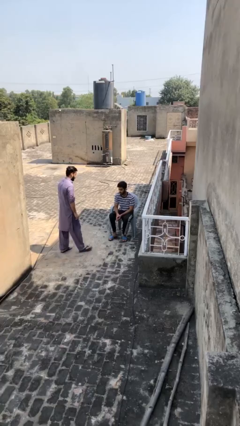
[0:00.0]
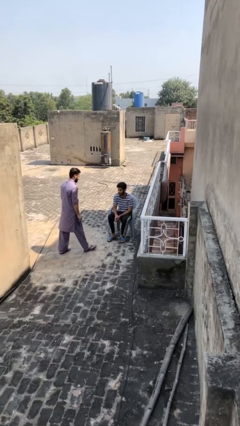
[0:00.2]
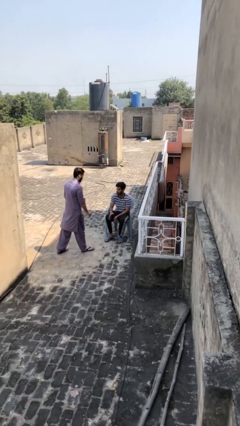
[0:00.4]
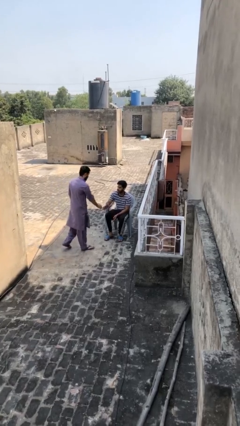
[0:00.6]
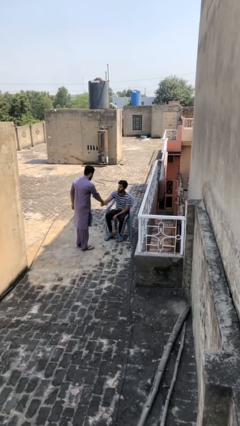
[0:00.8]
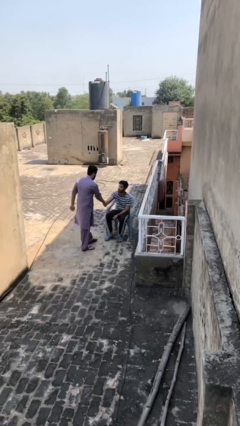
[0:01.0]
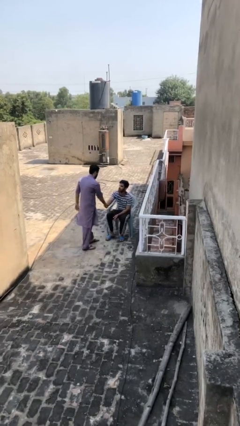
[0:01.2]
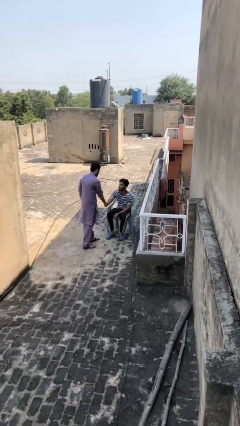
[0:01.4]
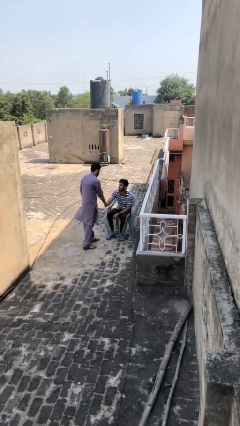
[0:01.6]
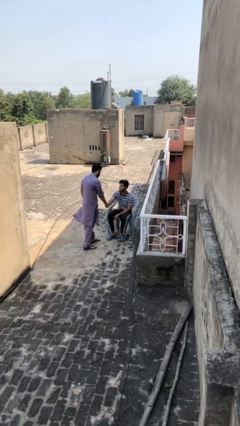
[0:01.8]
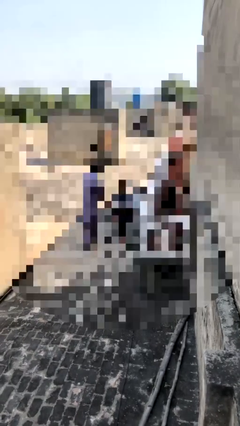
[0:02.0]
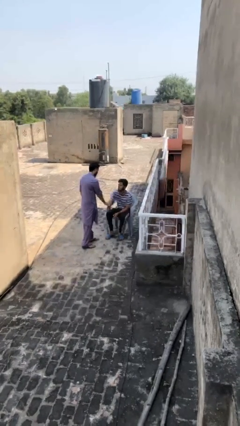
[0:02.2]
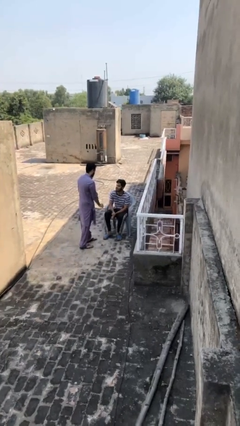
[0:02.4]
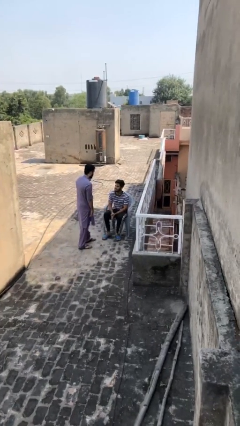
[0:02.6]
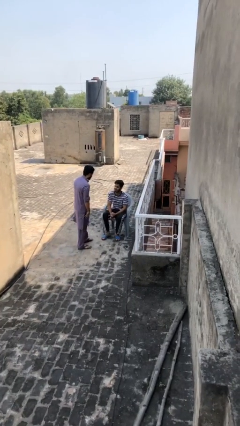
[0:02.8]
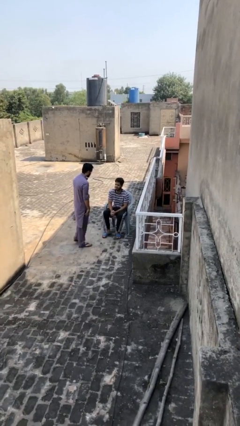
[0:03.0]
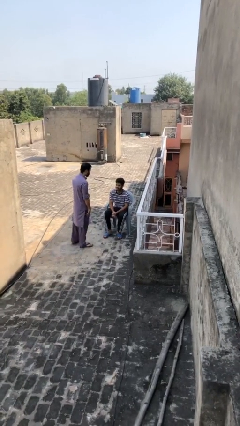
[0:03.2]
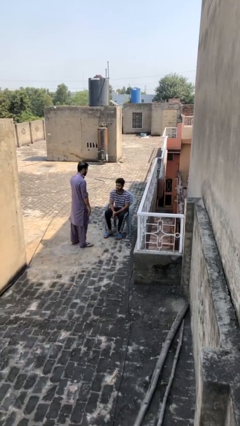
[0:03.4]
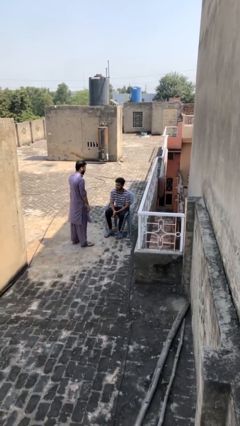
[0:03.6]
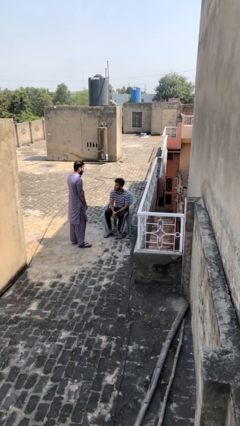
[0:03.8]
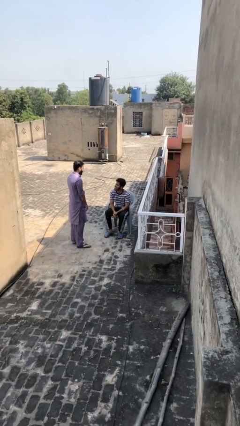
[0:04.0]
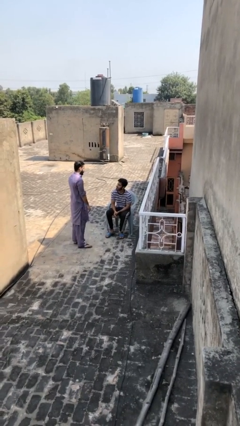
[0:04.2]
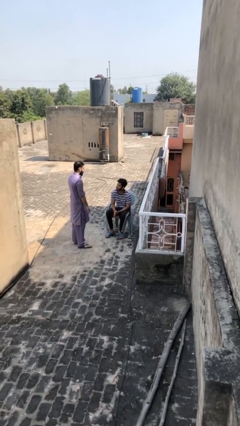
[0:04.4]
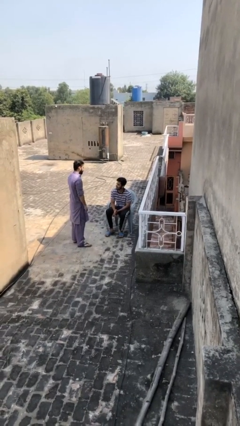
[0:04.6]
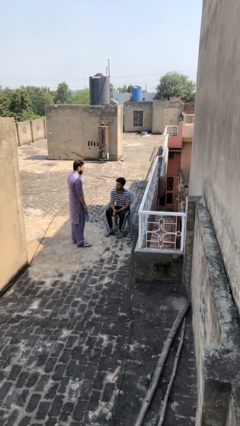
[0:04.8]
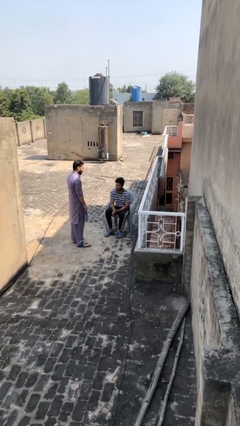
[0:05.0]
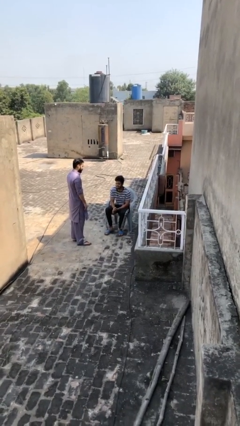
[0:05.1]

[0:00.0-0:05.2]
person shakes hand

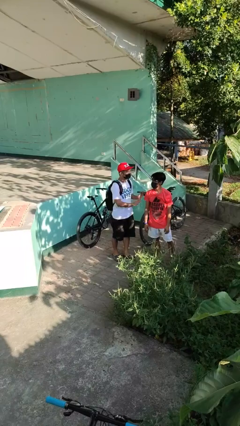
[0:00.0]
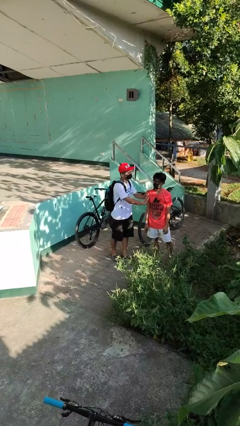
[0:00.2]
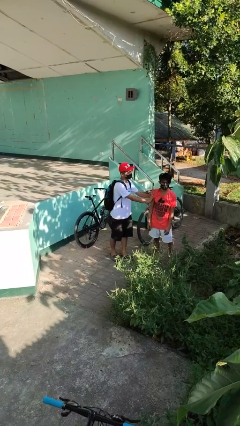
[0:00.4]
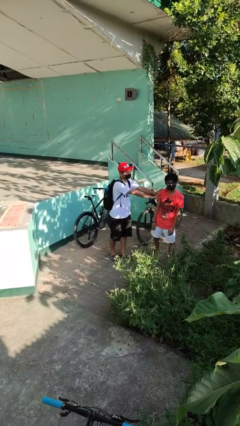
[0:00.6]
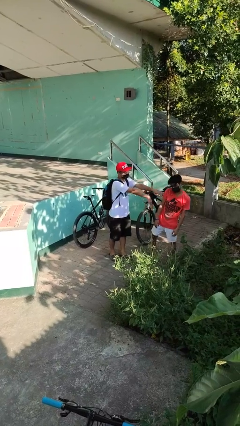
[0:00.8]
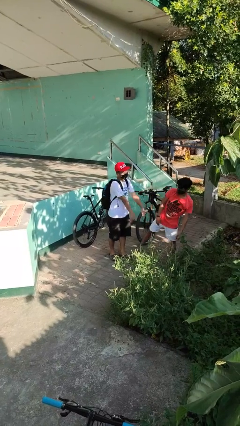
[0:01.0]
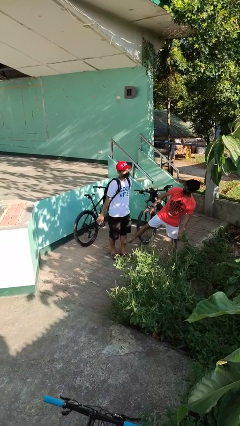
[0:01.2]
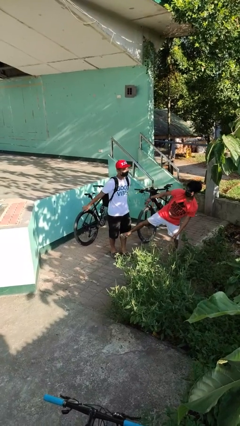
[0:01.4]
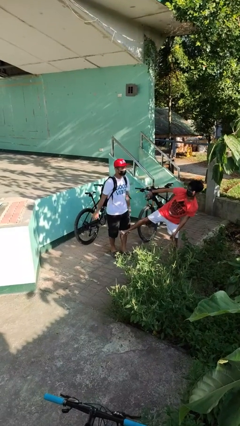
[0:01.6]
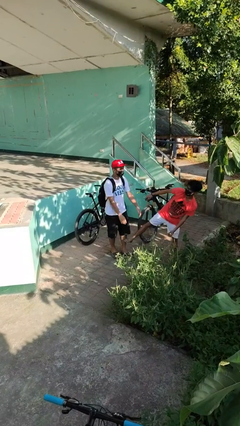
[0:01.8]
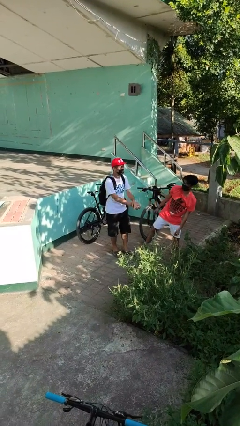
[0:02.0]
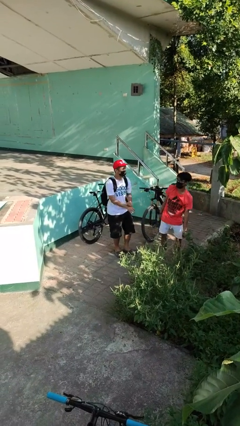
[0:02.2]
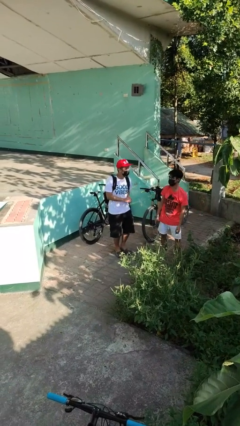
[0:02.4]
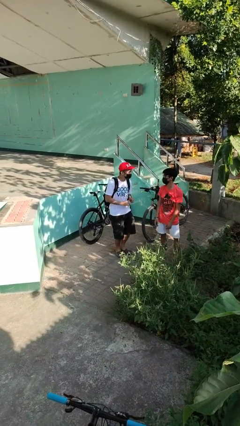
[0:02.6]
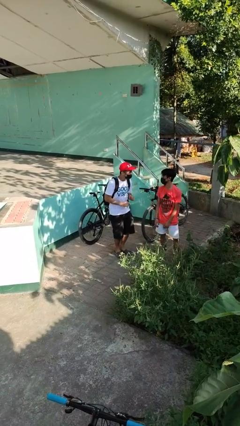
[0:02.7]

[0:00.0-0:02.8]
person shoves person

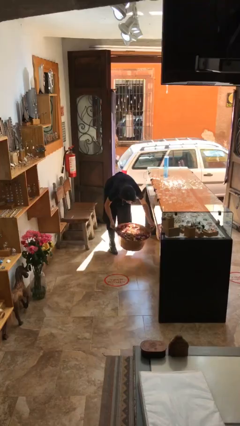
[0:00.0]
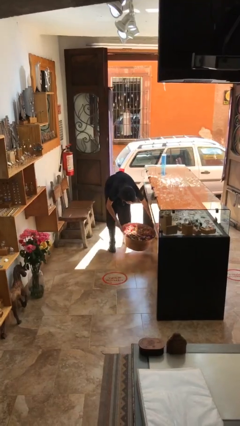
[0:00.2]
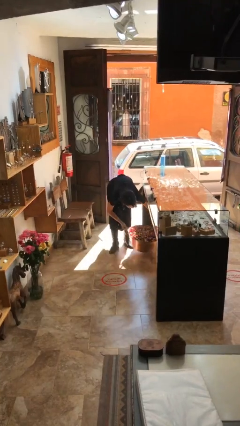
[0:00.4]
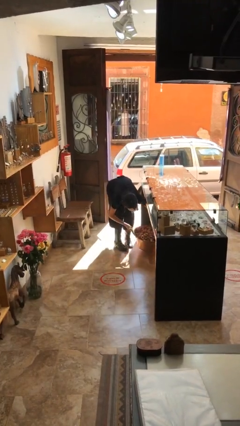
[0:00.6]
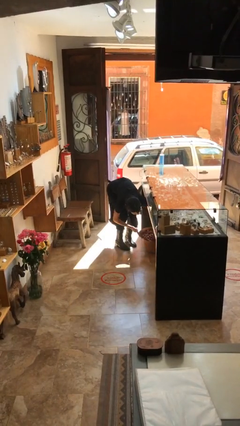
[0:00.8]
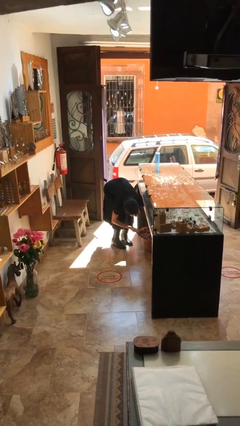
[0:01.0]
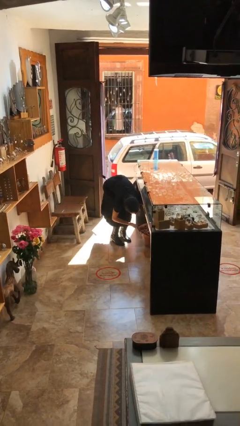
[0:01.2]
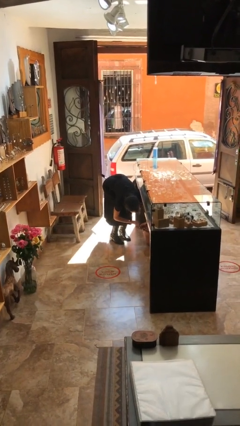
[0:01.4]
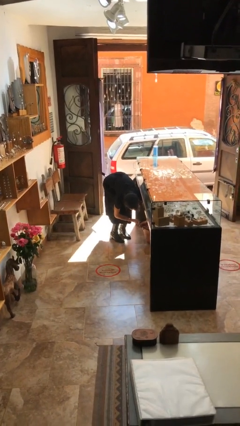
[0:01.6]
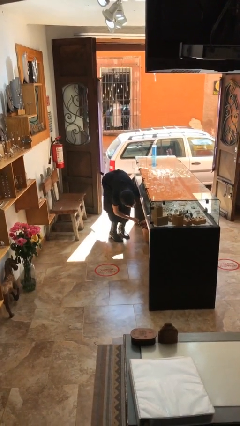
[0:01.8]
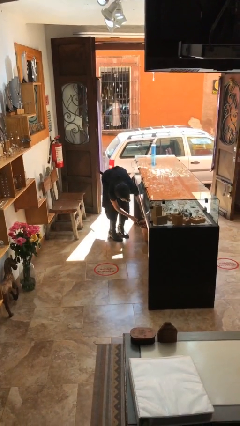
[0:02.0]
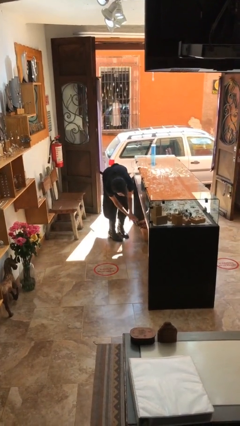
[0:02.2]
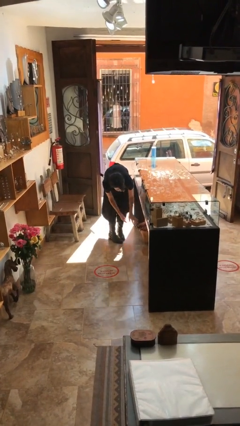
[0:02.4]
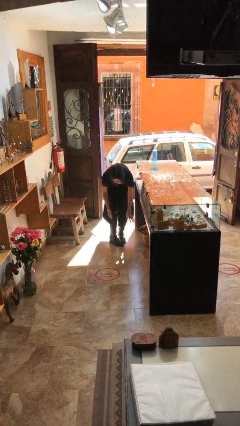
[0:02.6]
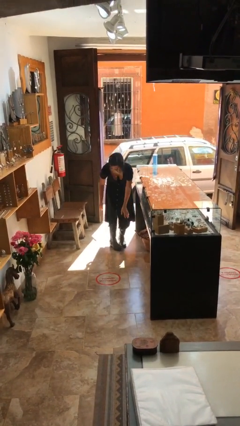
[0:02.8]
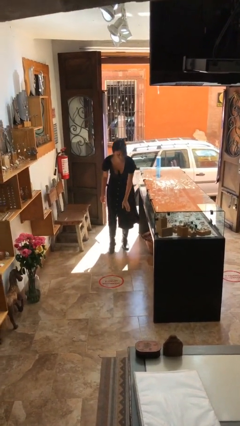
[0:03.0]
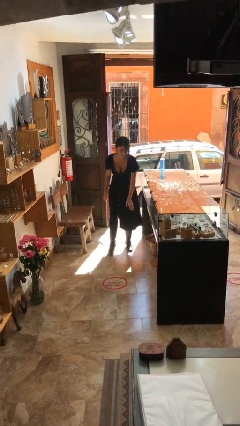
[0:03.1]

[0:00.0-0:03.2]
person puts down object on floor

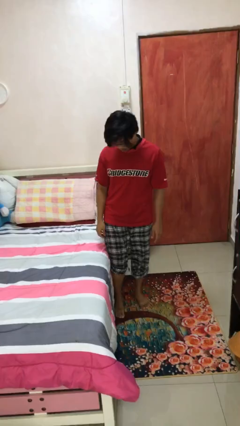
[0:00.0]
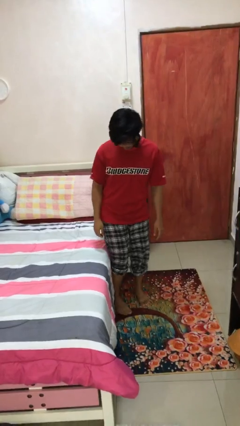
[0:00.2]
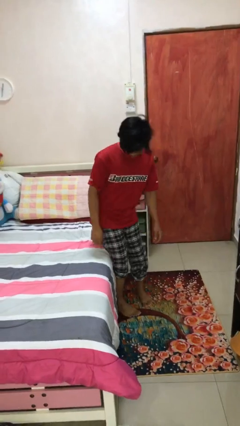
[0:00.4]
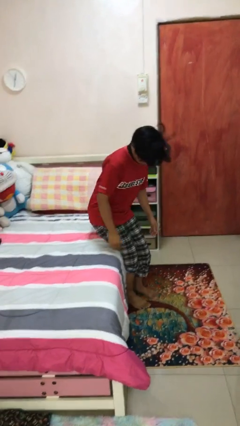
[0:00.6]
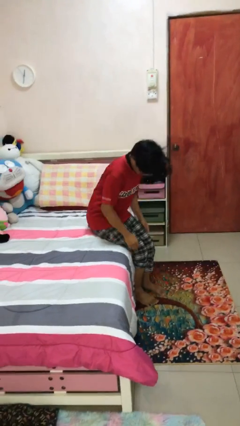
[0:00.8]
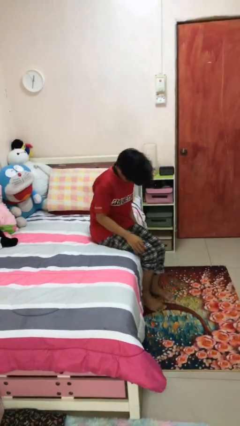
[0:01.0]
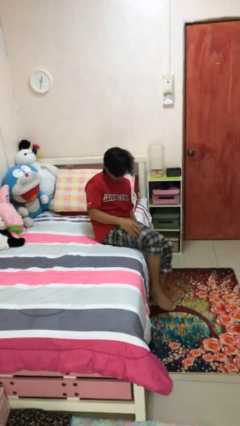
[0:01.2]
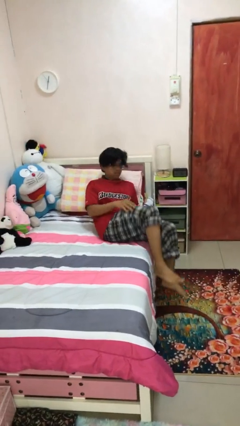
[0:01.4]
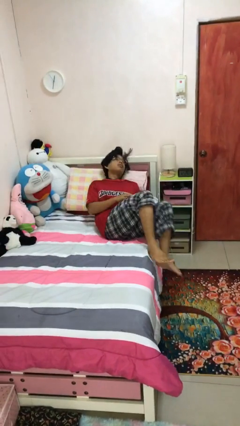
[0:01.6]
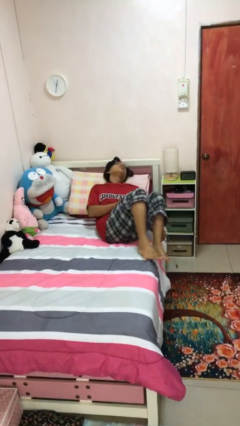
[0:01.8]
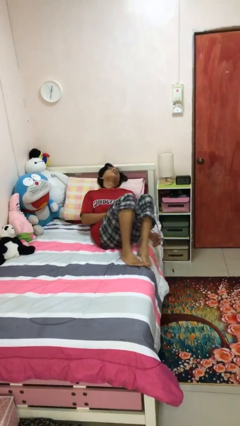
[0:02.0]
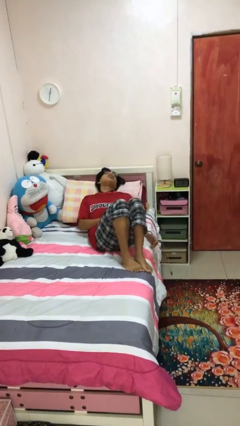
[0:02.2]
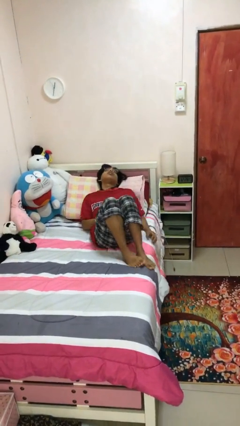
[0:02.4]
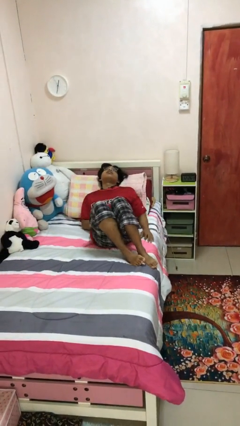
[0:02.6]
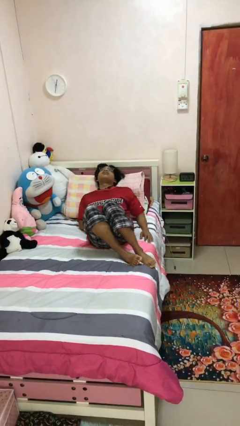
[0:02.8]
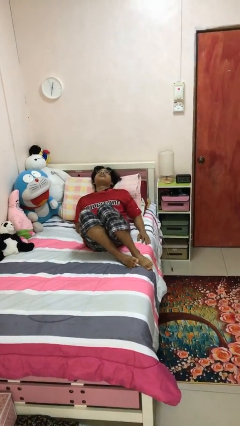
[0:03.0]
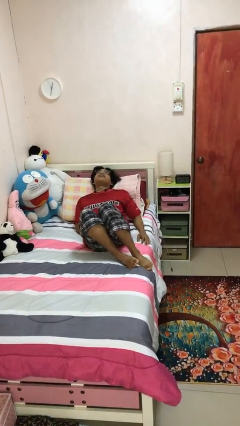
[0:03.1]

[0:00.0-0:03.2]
person lies down on bed

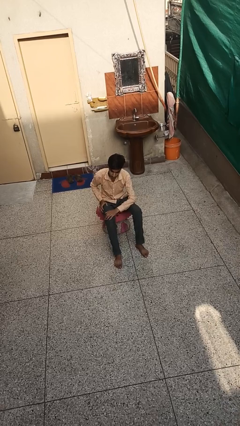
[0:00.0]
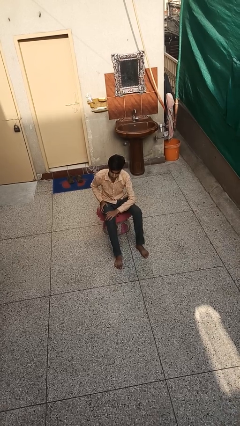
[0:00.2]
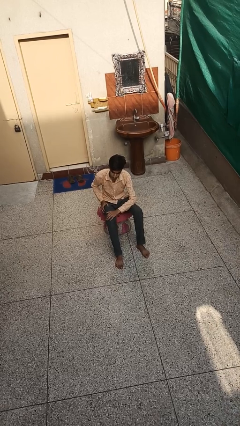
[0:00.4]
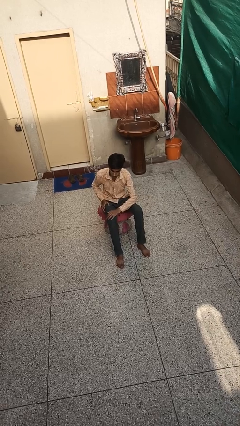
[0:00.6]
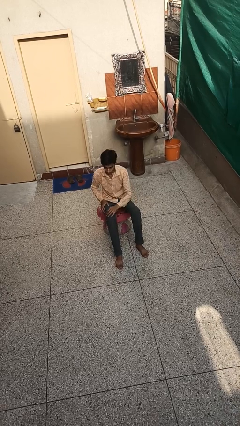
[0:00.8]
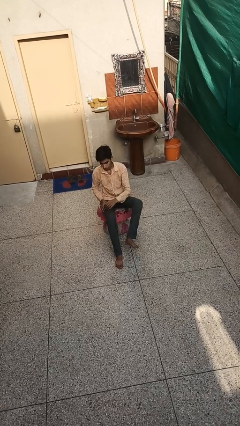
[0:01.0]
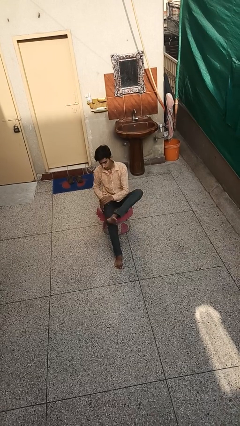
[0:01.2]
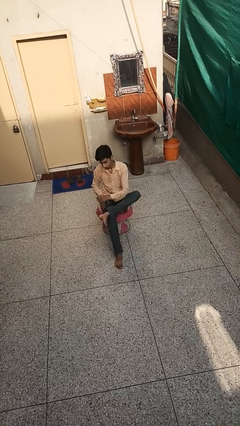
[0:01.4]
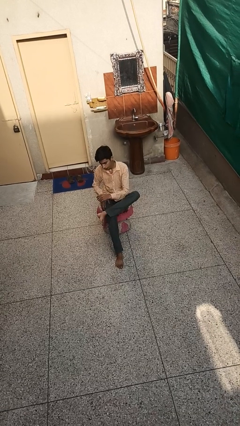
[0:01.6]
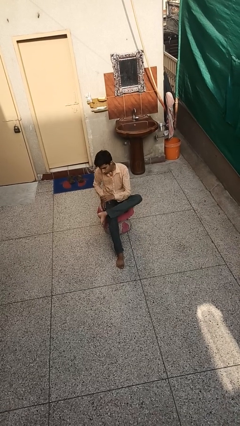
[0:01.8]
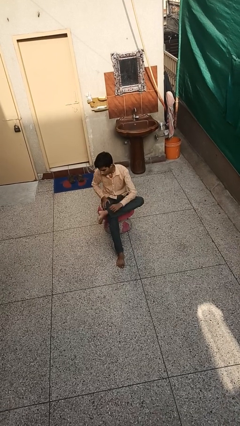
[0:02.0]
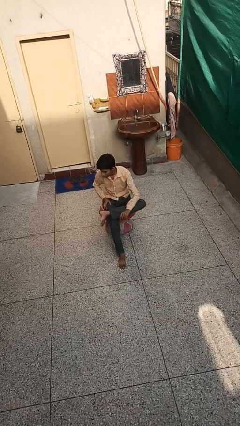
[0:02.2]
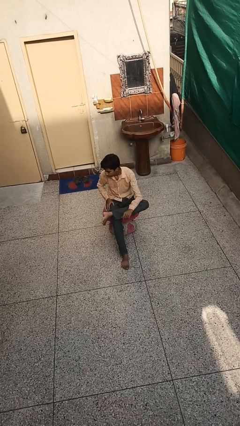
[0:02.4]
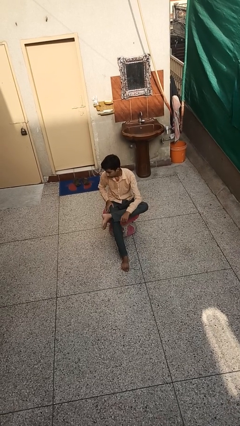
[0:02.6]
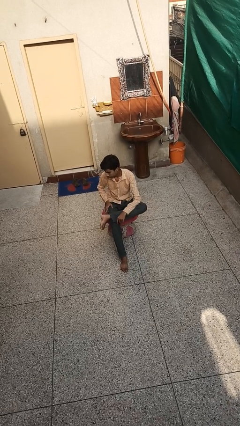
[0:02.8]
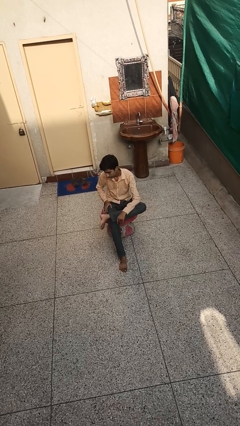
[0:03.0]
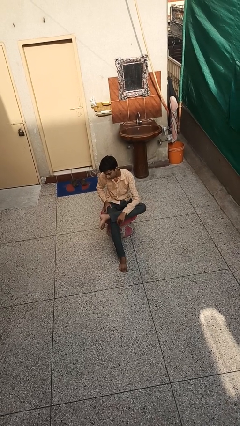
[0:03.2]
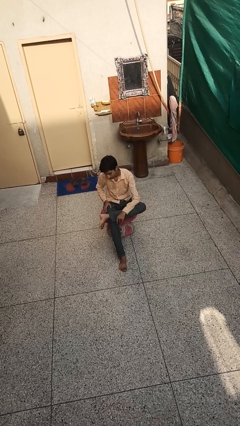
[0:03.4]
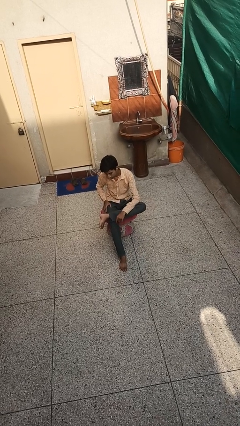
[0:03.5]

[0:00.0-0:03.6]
person crosses legs
